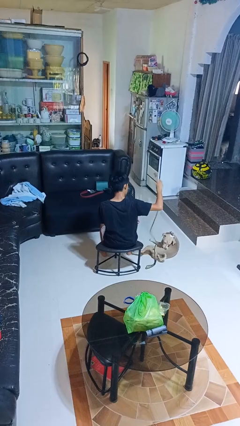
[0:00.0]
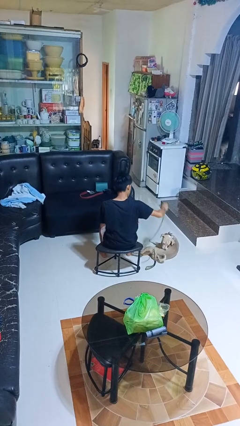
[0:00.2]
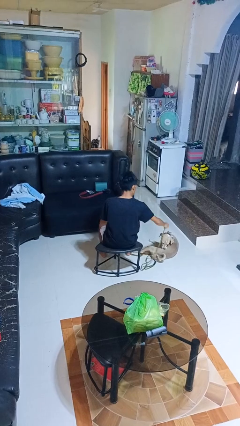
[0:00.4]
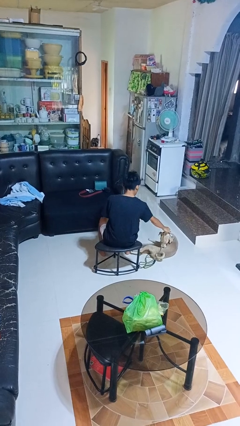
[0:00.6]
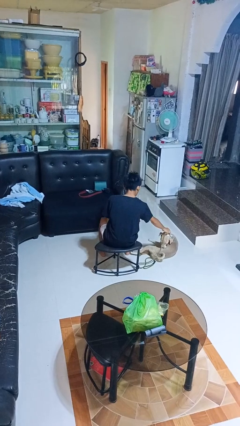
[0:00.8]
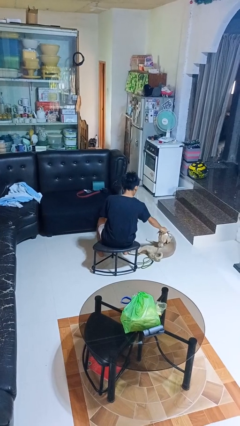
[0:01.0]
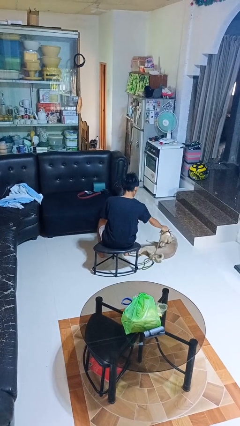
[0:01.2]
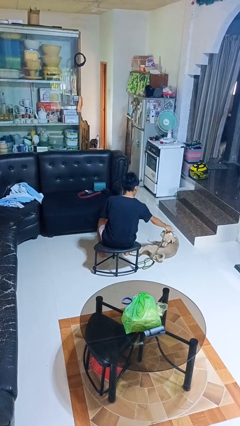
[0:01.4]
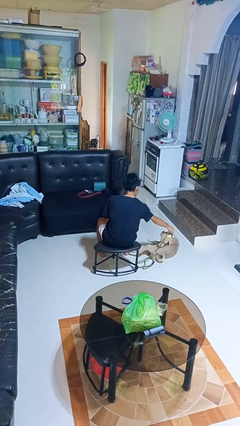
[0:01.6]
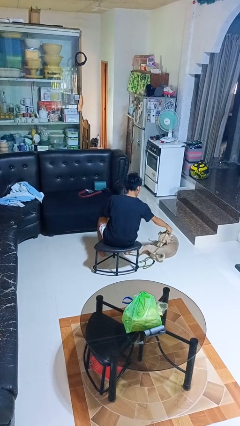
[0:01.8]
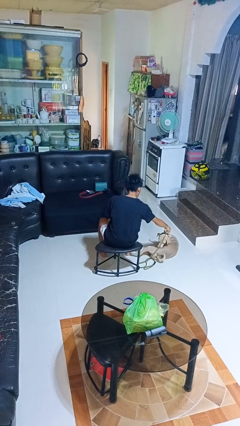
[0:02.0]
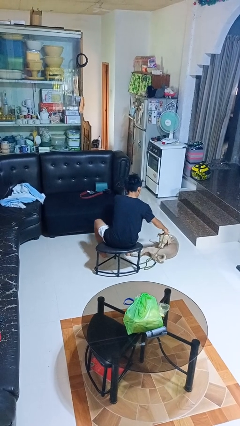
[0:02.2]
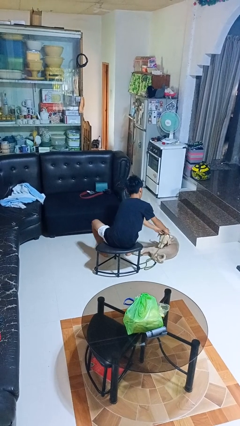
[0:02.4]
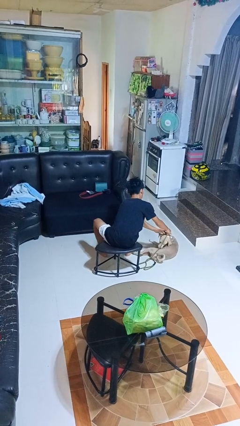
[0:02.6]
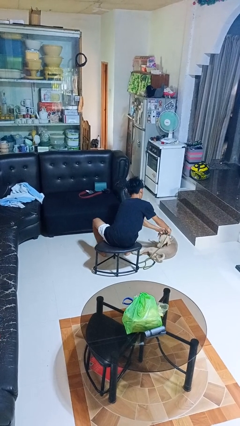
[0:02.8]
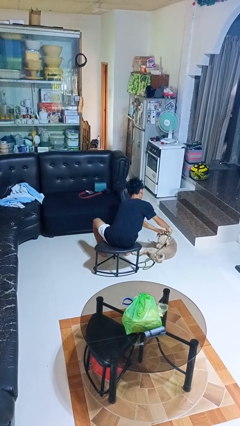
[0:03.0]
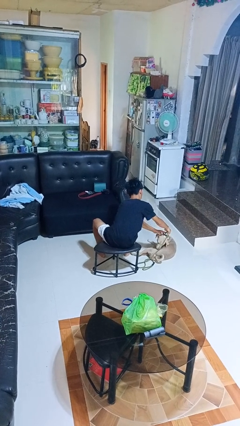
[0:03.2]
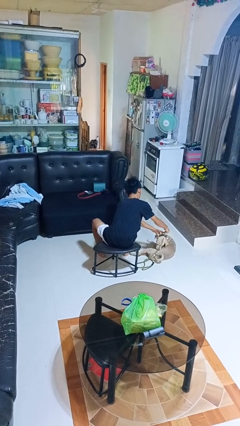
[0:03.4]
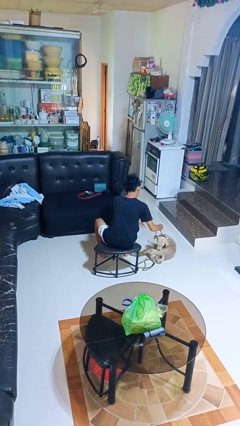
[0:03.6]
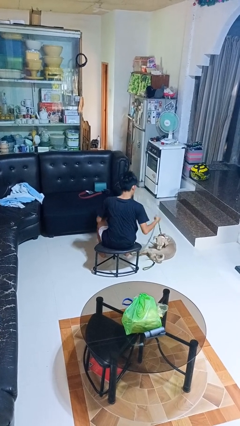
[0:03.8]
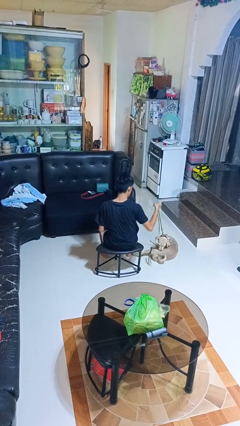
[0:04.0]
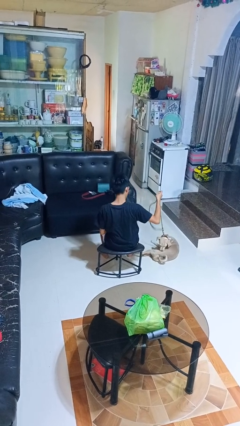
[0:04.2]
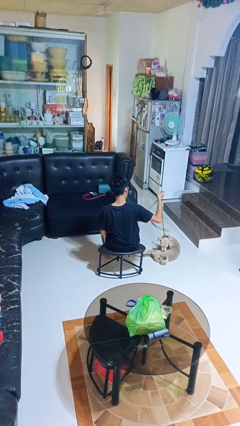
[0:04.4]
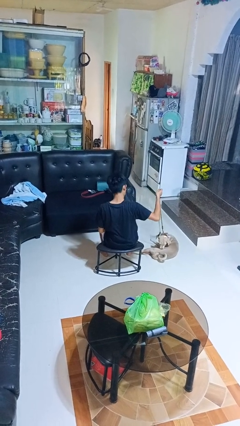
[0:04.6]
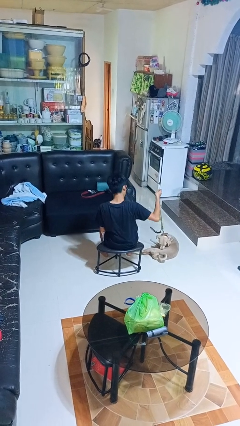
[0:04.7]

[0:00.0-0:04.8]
person attaches leash to dog

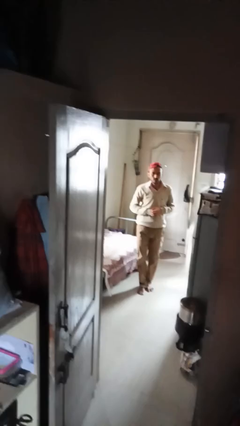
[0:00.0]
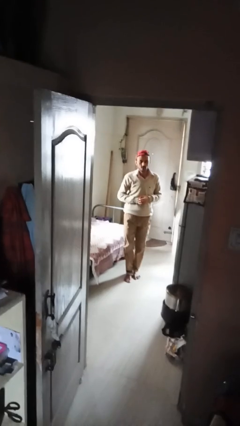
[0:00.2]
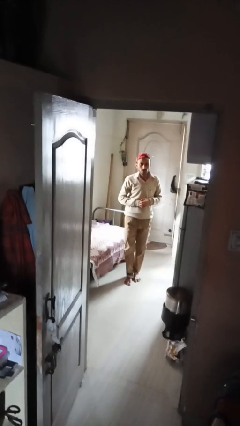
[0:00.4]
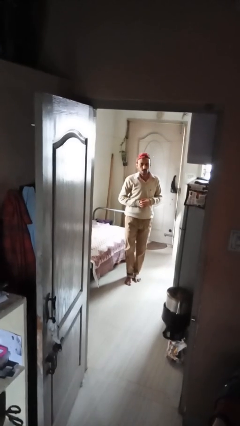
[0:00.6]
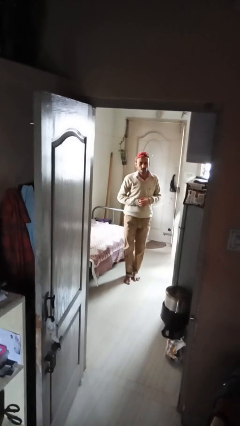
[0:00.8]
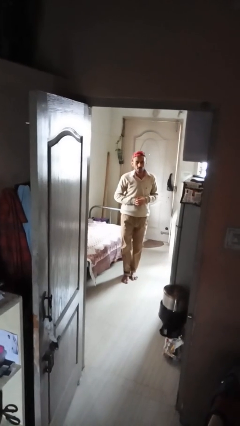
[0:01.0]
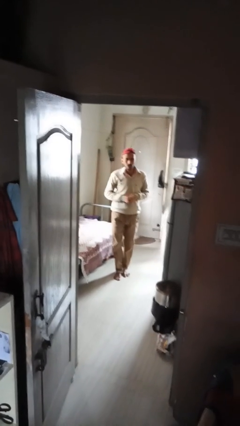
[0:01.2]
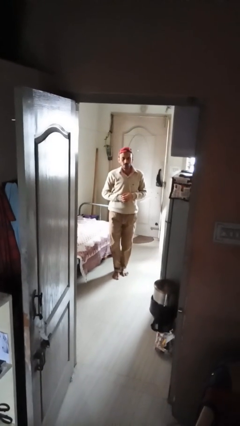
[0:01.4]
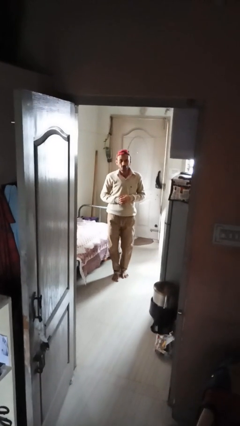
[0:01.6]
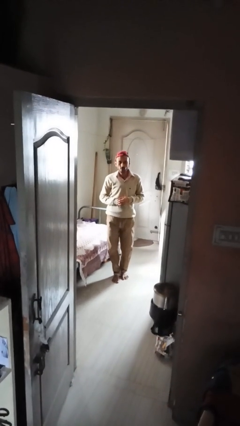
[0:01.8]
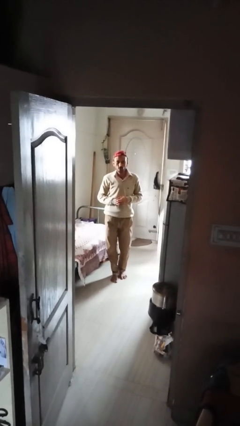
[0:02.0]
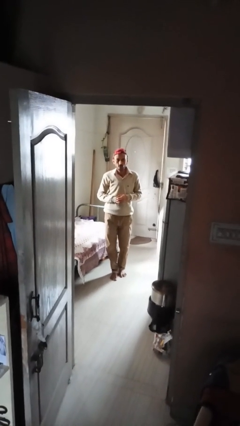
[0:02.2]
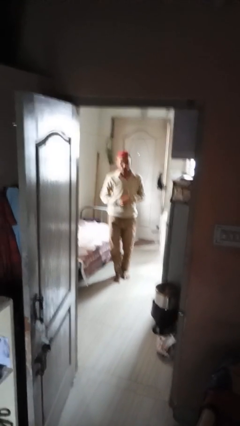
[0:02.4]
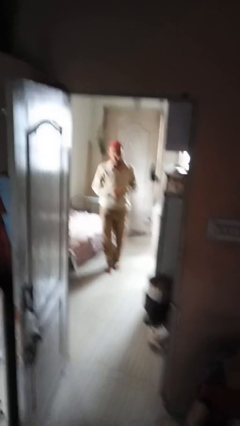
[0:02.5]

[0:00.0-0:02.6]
person karate kicks

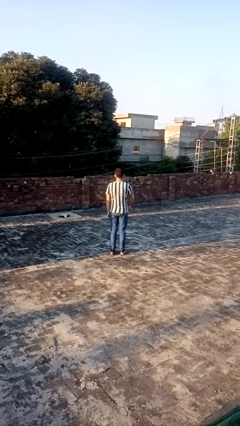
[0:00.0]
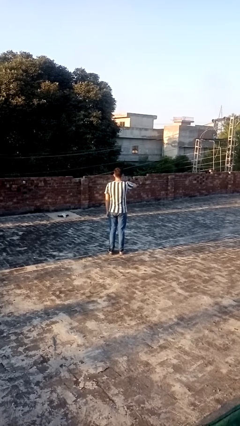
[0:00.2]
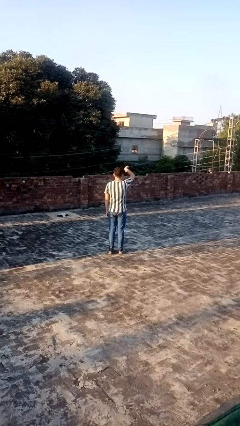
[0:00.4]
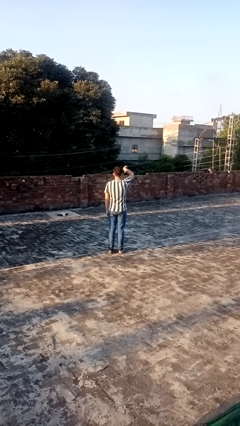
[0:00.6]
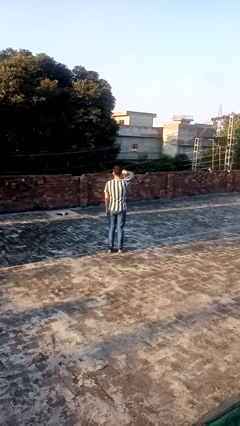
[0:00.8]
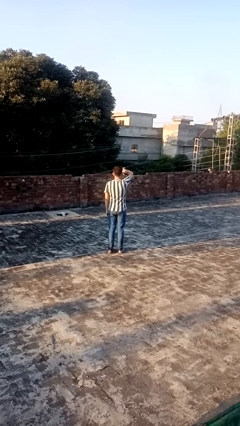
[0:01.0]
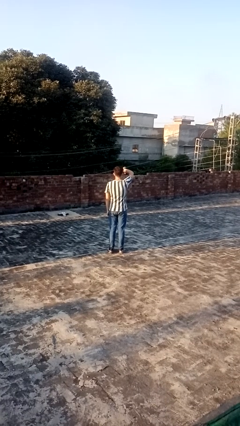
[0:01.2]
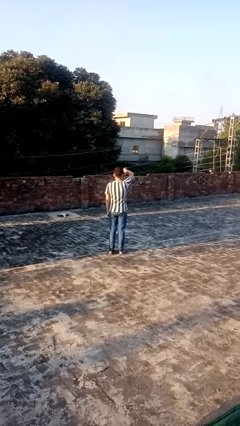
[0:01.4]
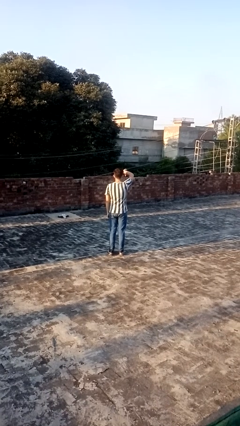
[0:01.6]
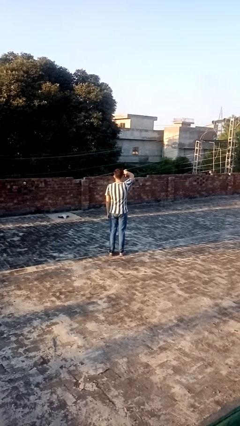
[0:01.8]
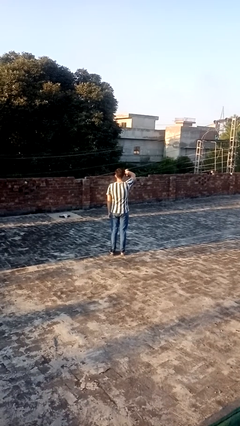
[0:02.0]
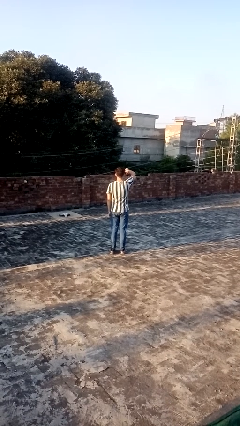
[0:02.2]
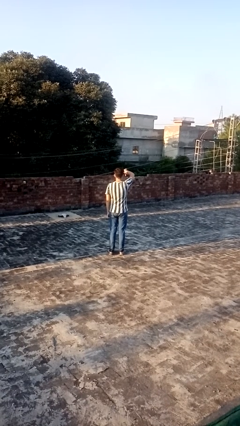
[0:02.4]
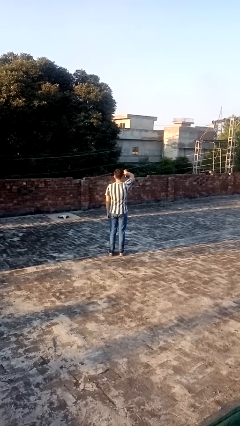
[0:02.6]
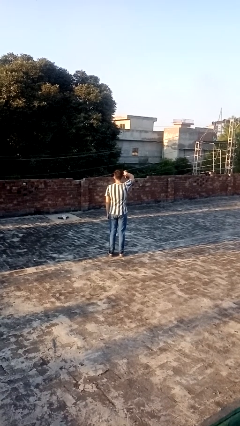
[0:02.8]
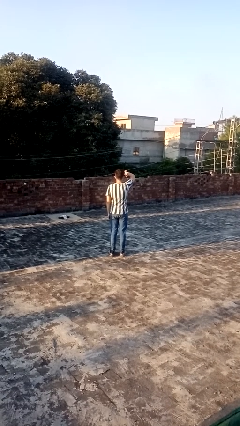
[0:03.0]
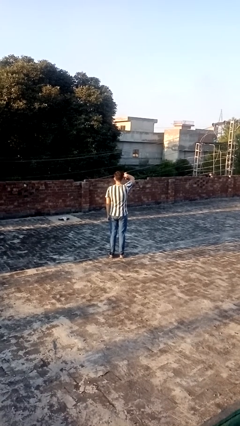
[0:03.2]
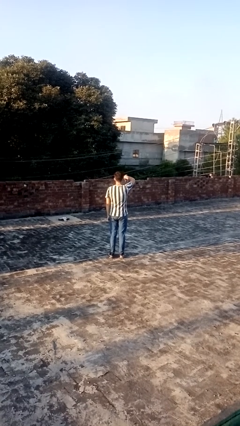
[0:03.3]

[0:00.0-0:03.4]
person gestures thumbs down

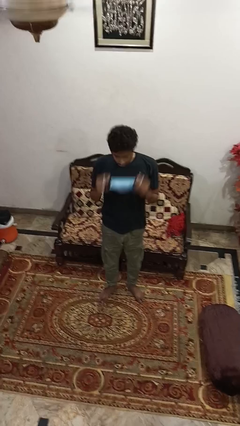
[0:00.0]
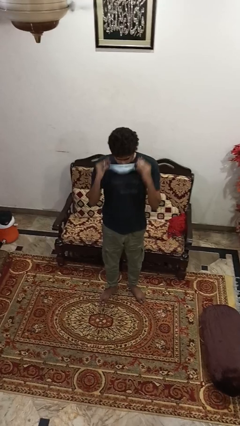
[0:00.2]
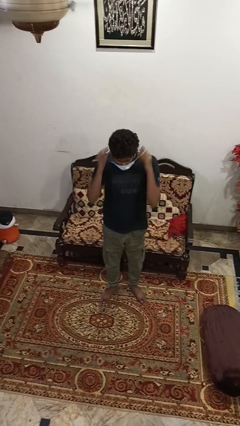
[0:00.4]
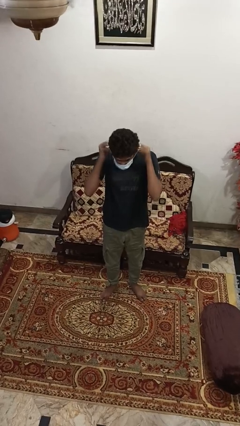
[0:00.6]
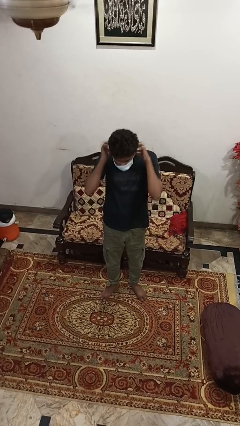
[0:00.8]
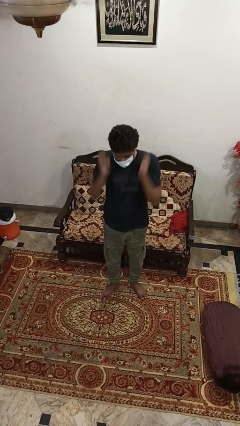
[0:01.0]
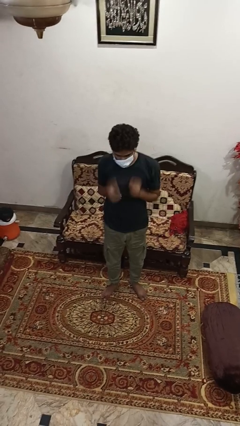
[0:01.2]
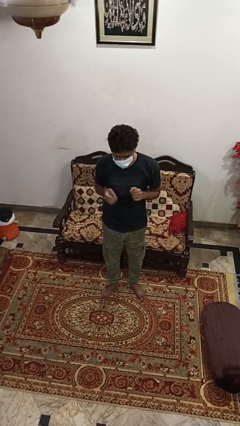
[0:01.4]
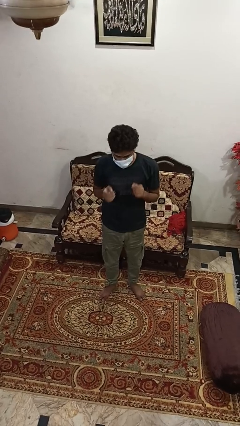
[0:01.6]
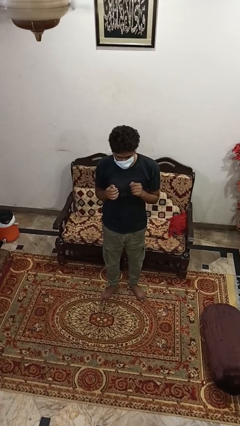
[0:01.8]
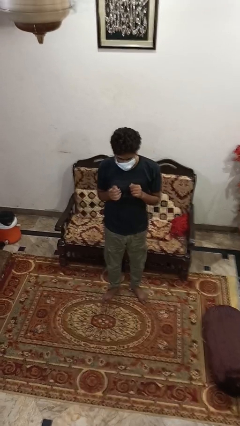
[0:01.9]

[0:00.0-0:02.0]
person puts on facemask

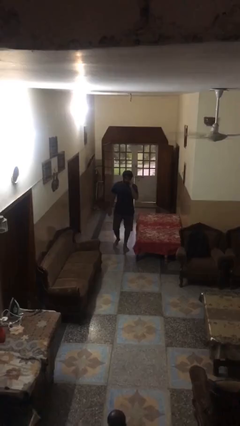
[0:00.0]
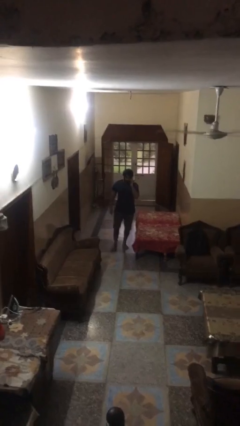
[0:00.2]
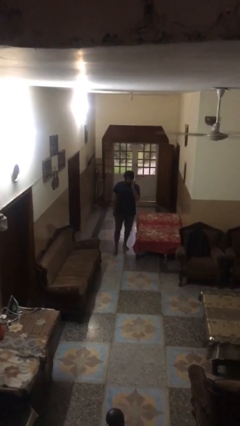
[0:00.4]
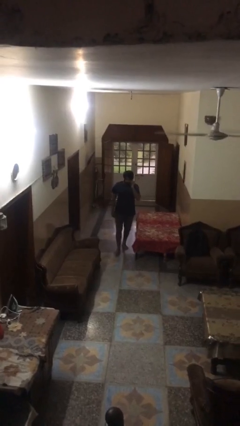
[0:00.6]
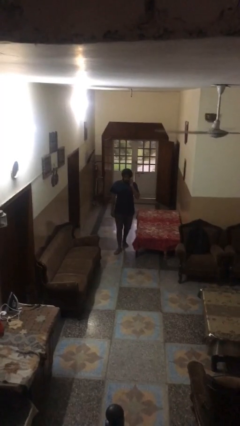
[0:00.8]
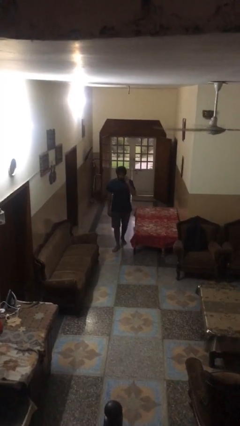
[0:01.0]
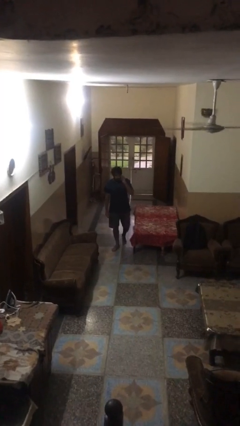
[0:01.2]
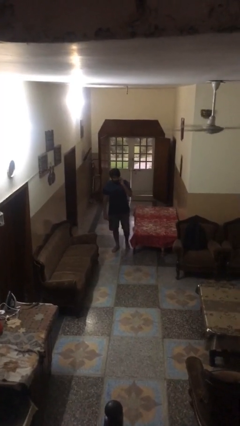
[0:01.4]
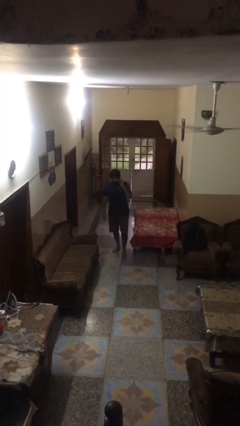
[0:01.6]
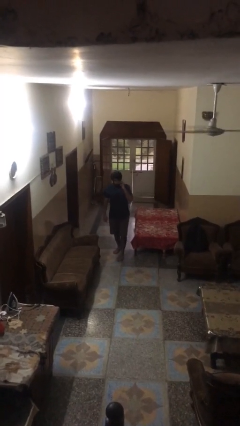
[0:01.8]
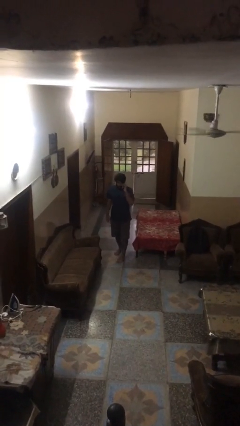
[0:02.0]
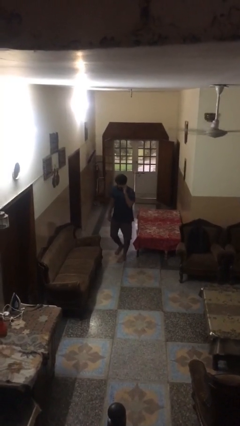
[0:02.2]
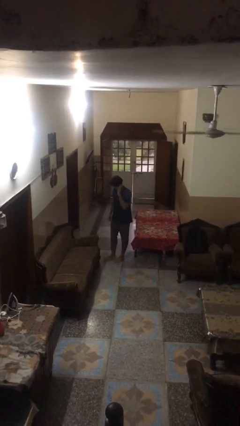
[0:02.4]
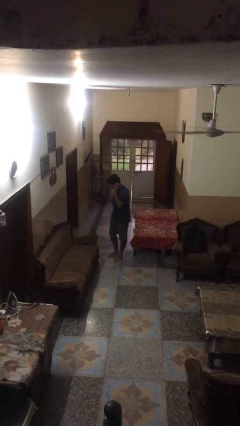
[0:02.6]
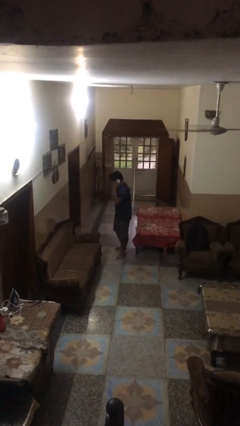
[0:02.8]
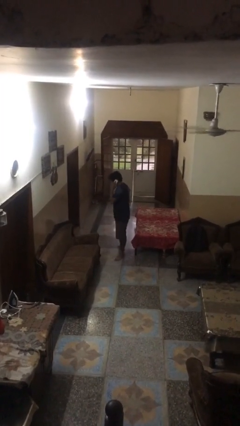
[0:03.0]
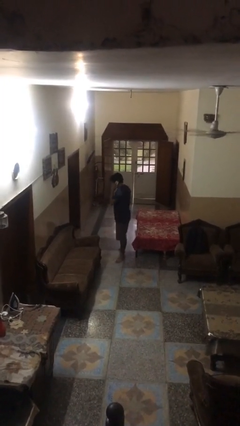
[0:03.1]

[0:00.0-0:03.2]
person talks on phone

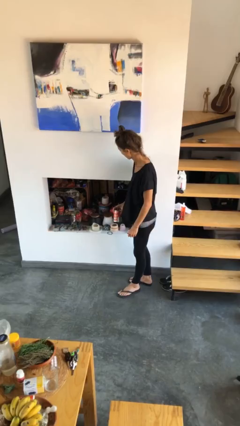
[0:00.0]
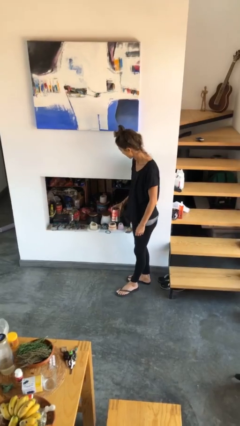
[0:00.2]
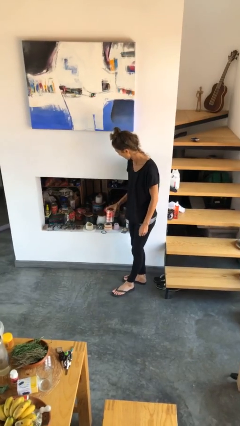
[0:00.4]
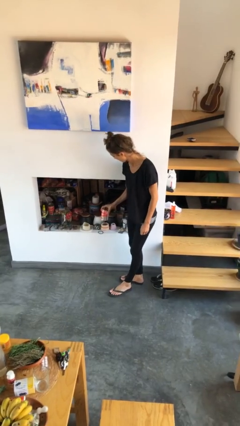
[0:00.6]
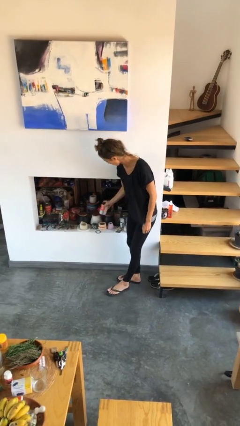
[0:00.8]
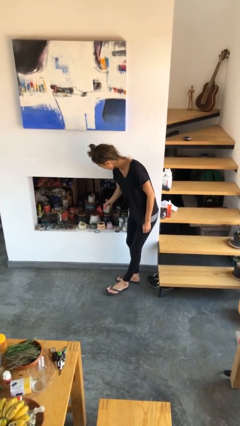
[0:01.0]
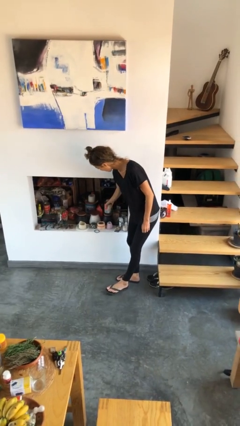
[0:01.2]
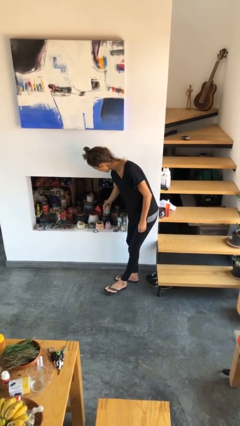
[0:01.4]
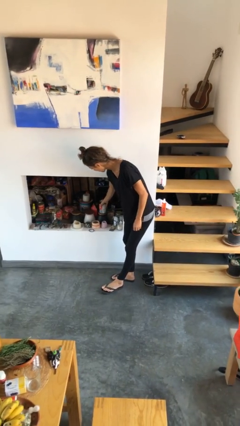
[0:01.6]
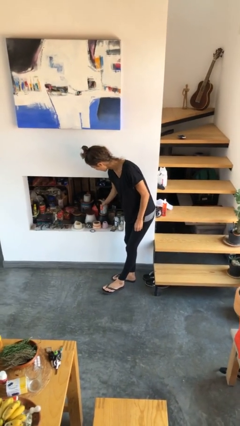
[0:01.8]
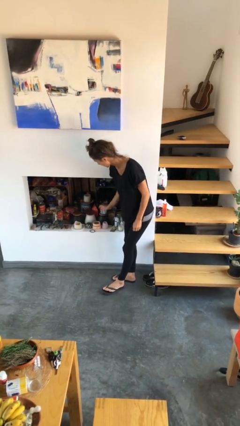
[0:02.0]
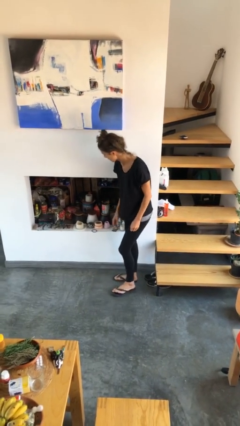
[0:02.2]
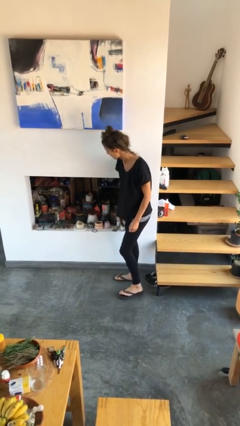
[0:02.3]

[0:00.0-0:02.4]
person puts down object into cabinet
